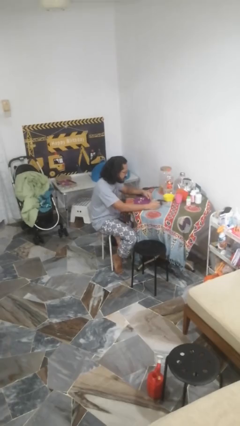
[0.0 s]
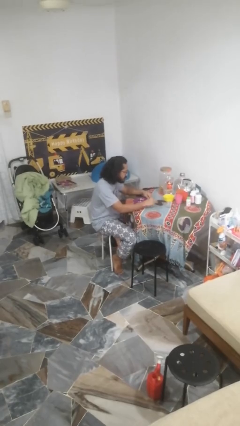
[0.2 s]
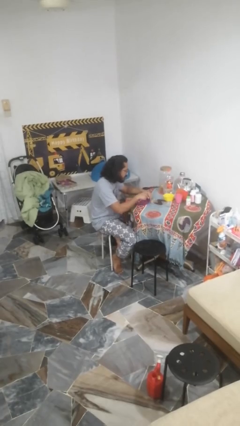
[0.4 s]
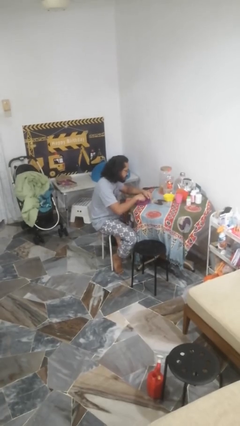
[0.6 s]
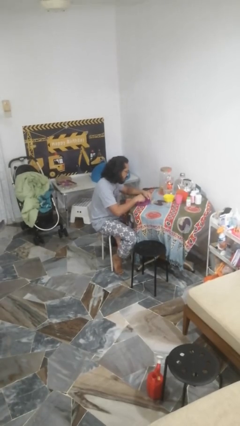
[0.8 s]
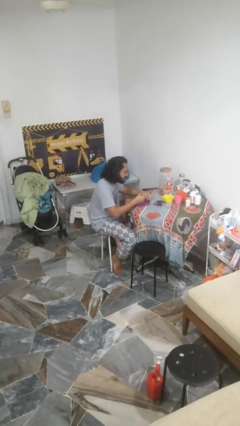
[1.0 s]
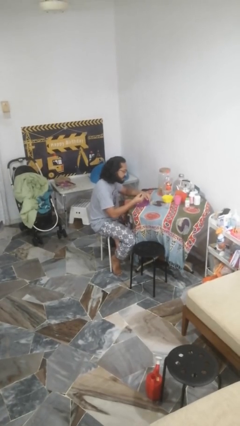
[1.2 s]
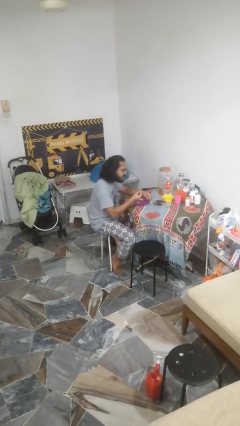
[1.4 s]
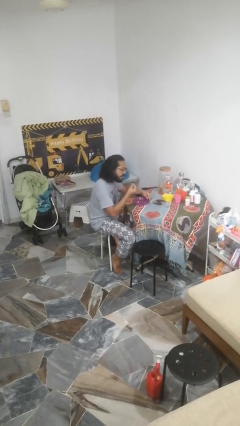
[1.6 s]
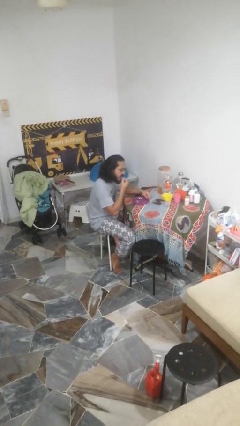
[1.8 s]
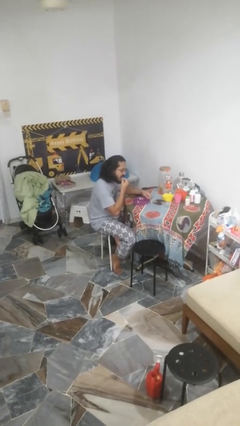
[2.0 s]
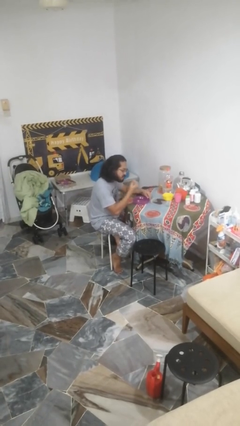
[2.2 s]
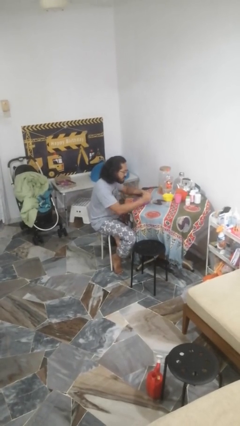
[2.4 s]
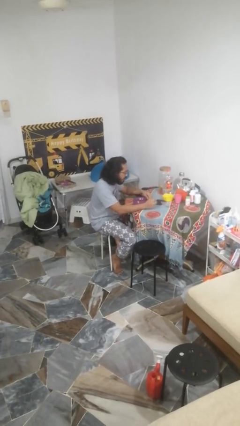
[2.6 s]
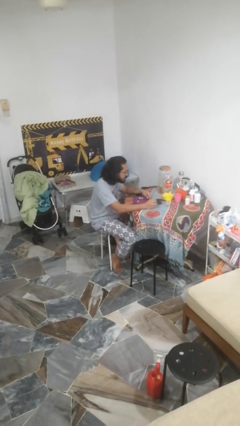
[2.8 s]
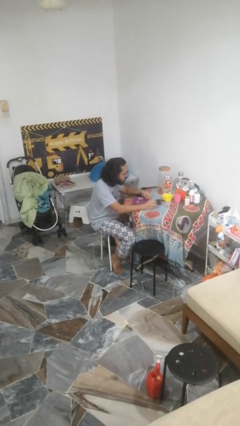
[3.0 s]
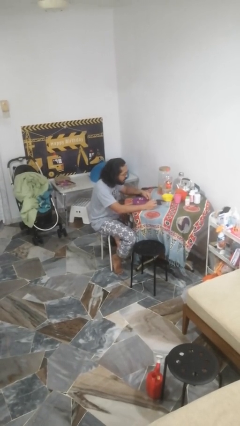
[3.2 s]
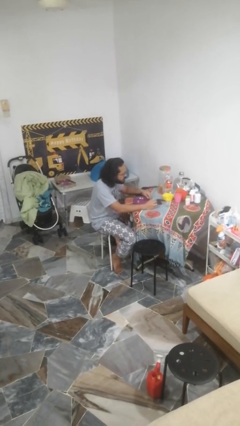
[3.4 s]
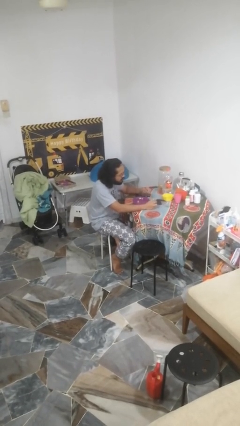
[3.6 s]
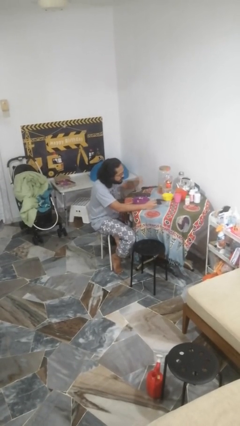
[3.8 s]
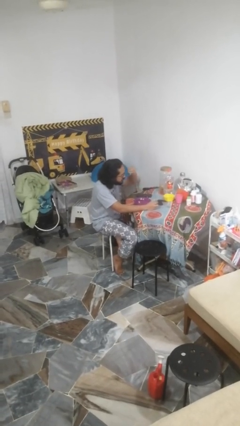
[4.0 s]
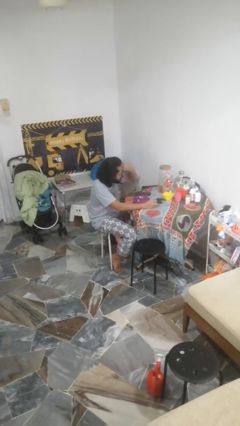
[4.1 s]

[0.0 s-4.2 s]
person eats with hands

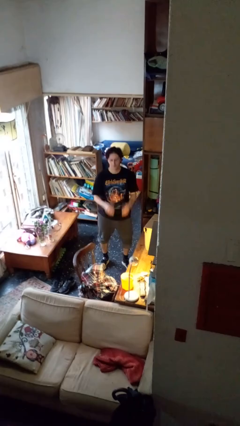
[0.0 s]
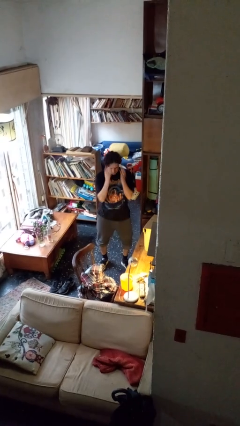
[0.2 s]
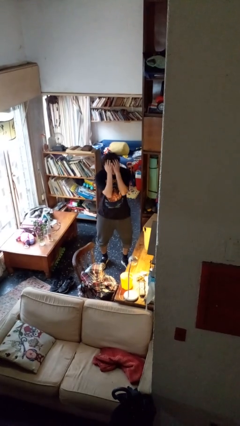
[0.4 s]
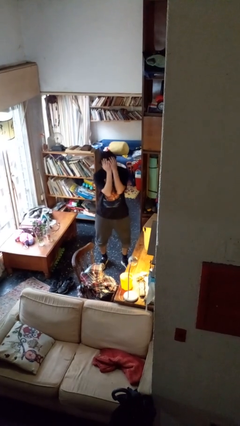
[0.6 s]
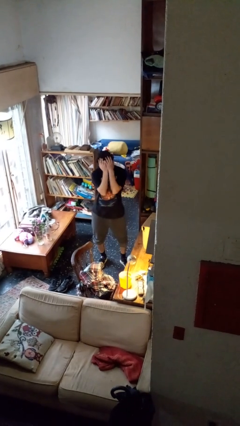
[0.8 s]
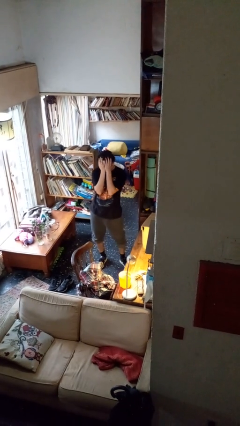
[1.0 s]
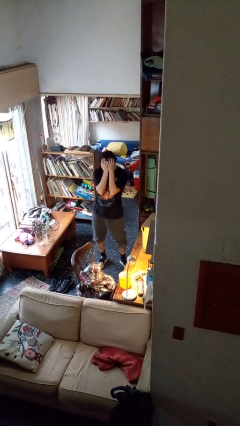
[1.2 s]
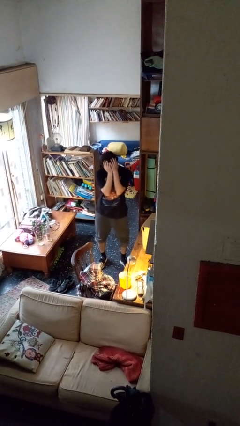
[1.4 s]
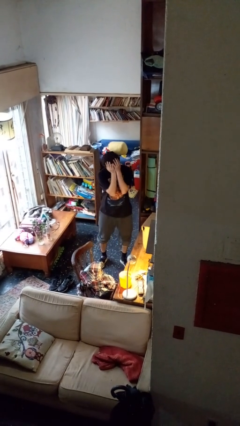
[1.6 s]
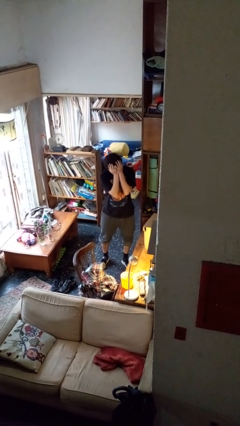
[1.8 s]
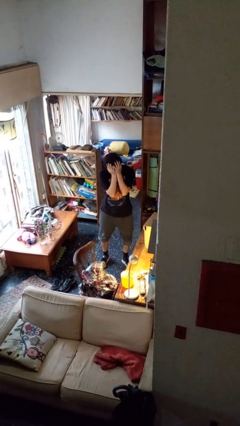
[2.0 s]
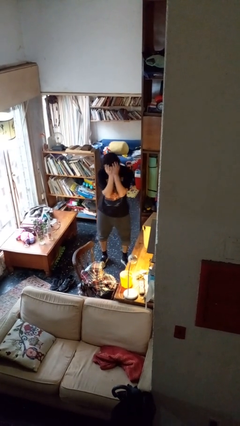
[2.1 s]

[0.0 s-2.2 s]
person covers face with hands

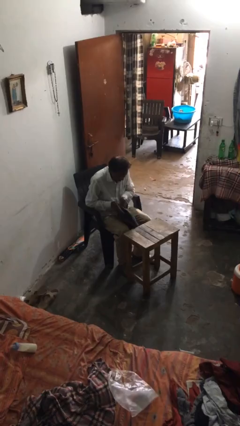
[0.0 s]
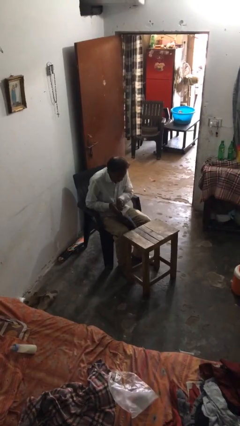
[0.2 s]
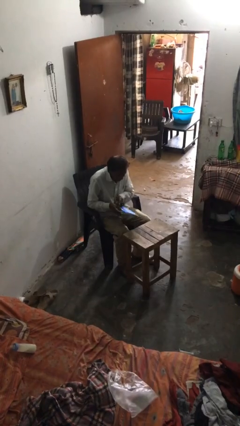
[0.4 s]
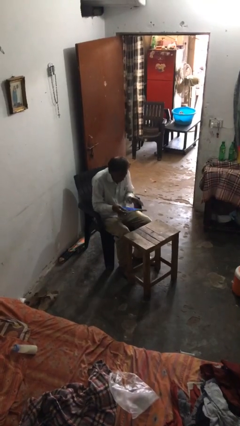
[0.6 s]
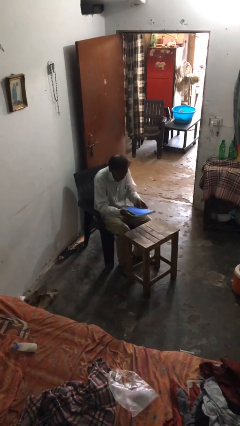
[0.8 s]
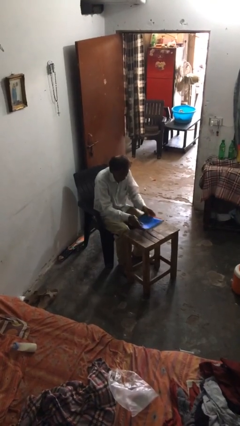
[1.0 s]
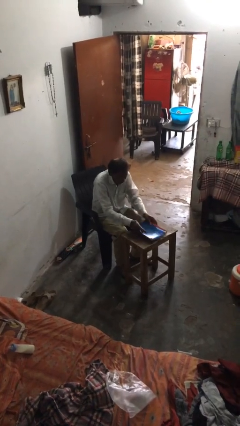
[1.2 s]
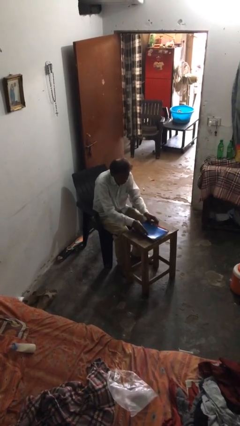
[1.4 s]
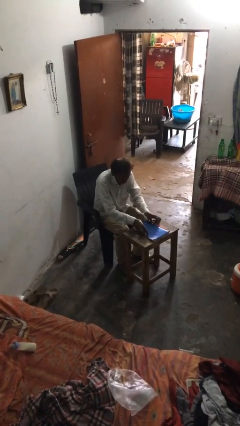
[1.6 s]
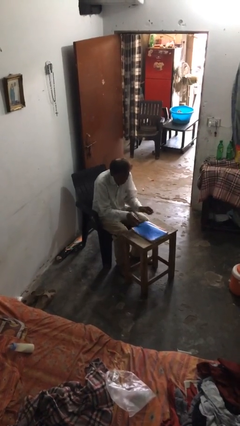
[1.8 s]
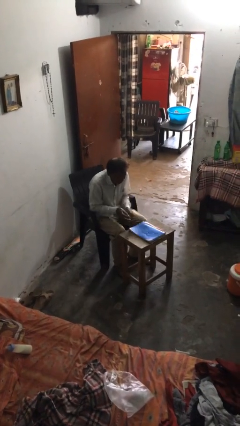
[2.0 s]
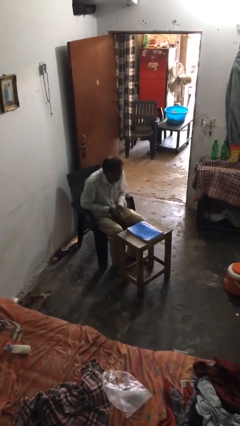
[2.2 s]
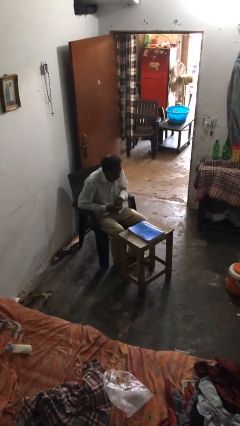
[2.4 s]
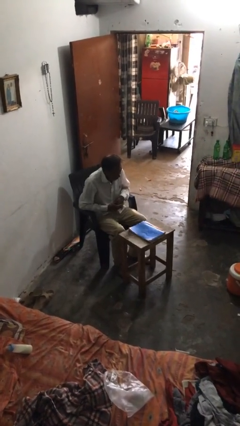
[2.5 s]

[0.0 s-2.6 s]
person puts down object on table

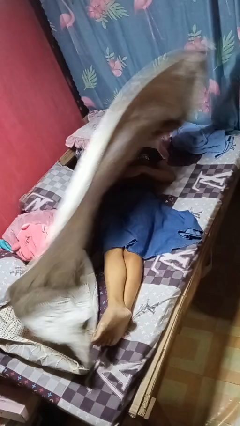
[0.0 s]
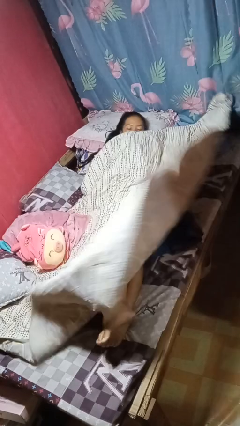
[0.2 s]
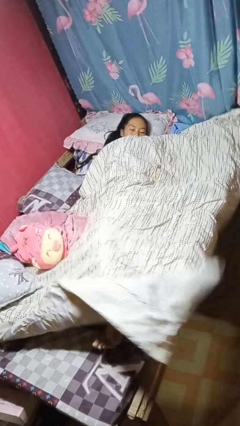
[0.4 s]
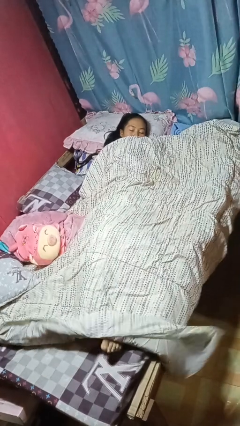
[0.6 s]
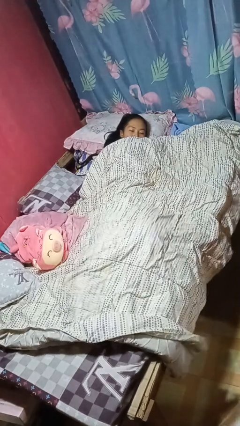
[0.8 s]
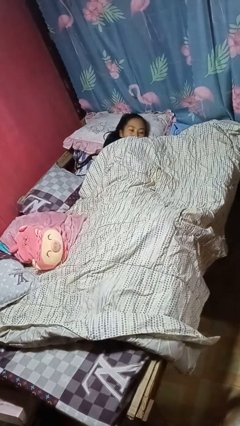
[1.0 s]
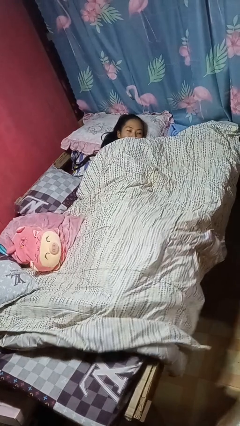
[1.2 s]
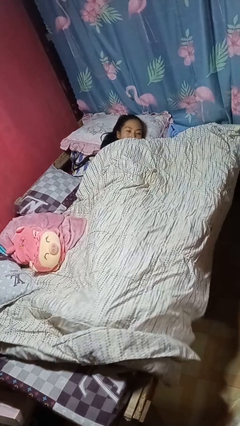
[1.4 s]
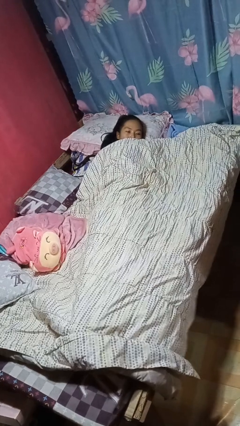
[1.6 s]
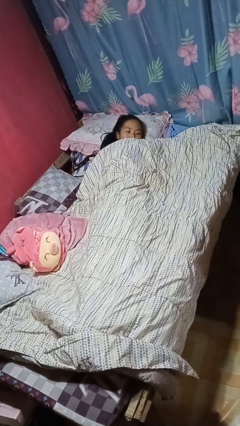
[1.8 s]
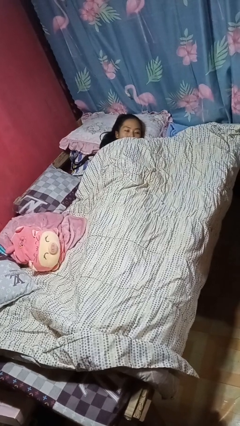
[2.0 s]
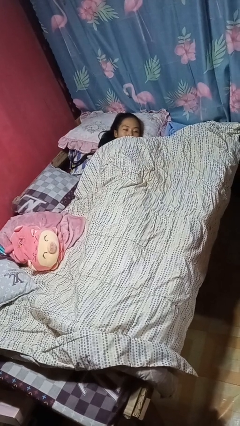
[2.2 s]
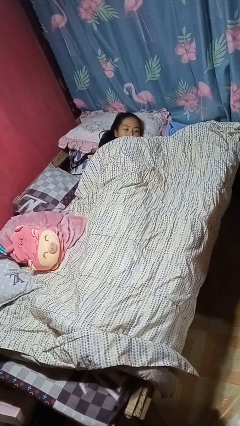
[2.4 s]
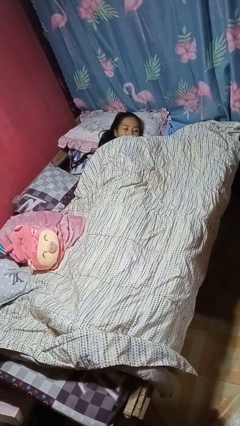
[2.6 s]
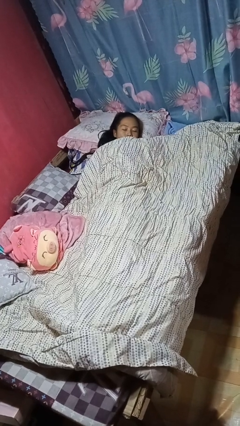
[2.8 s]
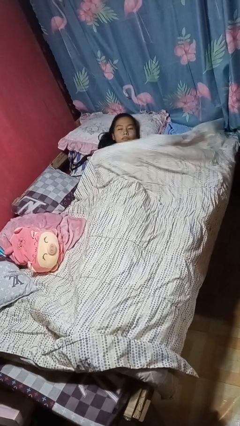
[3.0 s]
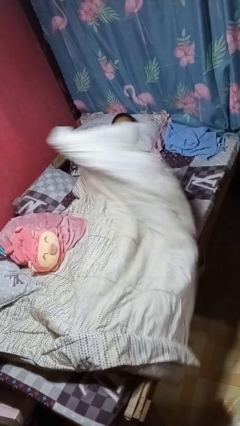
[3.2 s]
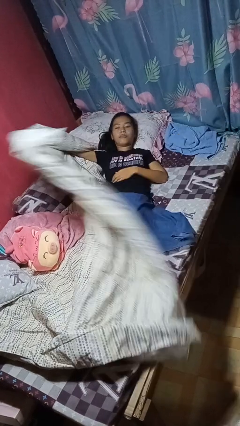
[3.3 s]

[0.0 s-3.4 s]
person covers with bedsheets

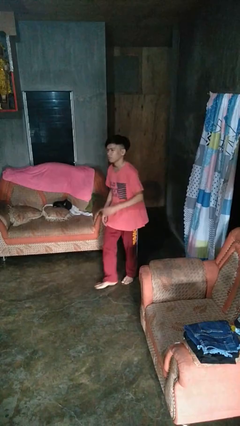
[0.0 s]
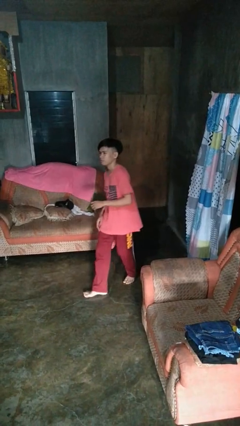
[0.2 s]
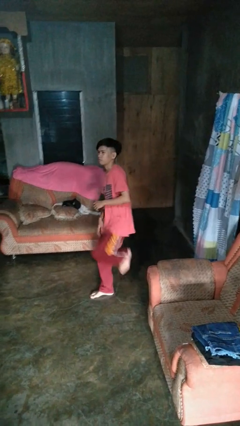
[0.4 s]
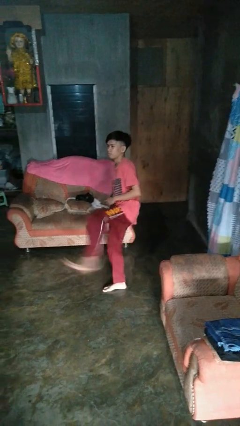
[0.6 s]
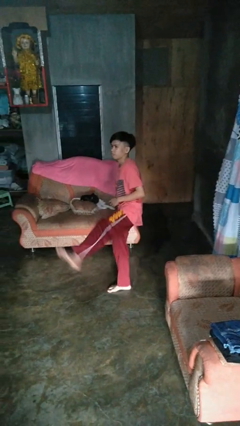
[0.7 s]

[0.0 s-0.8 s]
person karate kicks

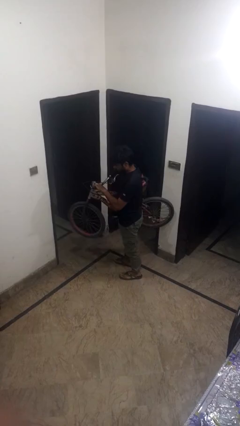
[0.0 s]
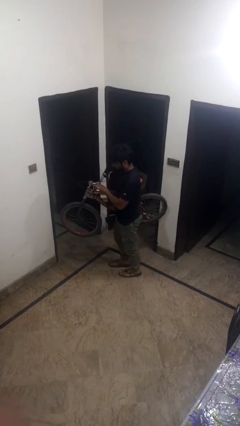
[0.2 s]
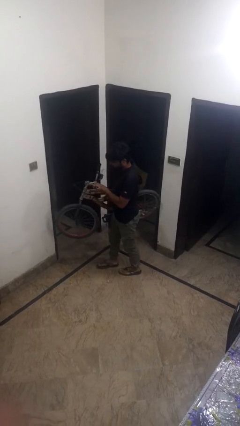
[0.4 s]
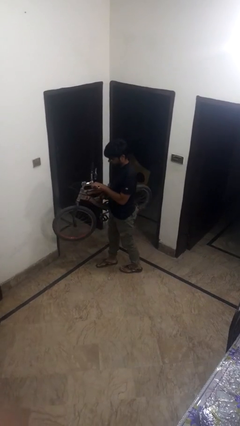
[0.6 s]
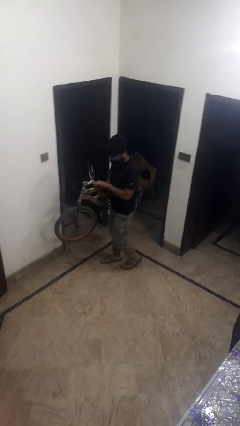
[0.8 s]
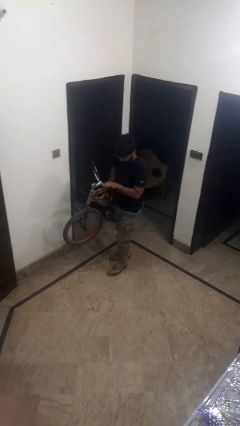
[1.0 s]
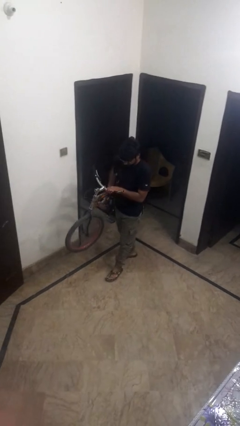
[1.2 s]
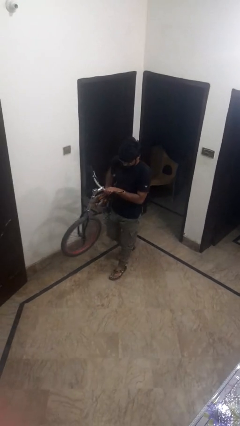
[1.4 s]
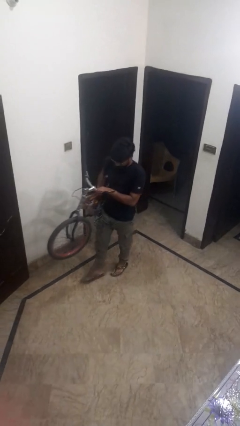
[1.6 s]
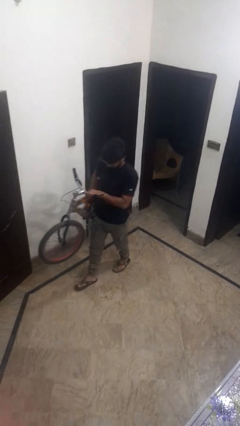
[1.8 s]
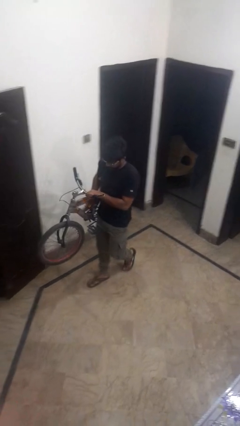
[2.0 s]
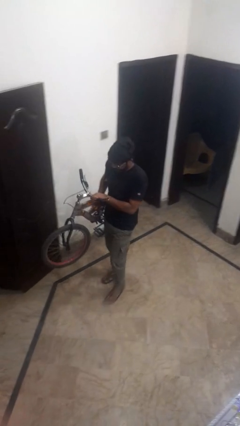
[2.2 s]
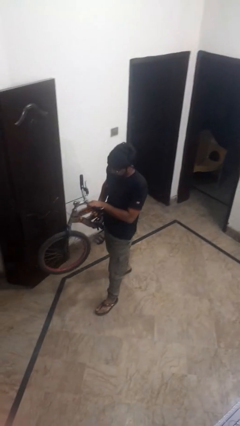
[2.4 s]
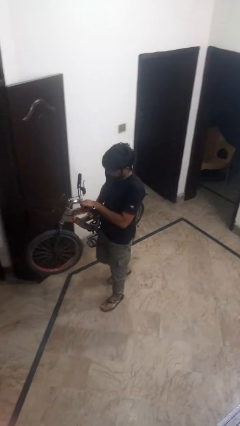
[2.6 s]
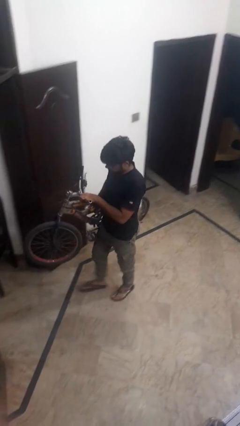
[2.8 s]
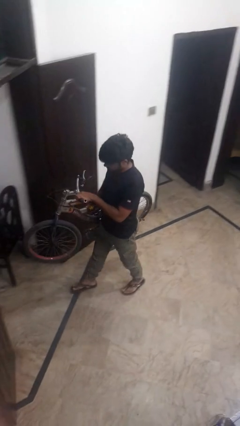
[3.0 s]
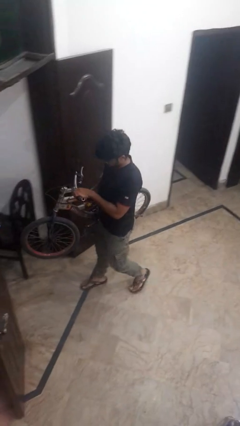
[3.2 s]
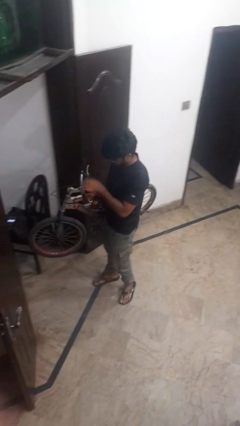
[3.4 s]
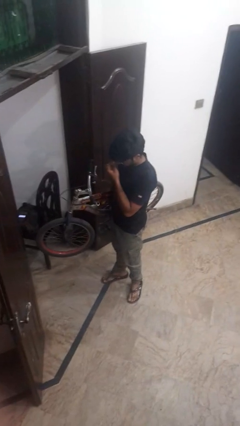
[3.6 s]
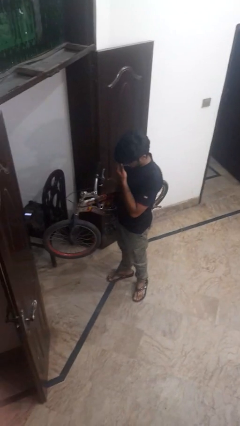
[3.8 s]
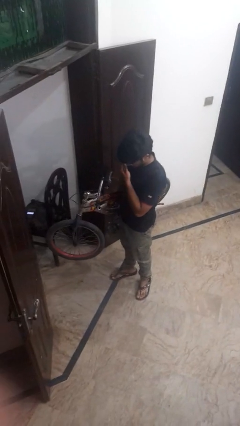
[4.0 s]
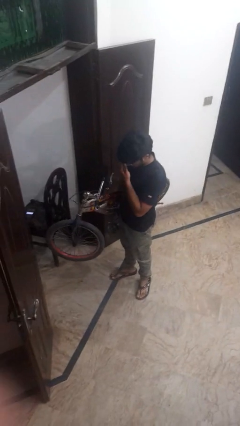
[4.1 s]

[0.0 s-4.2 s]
person carries bicycle
